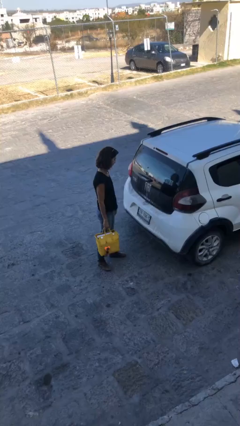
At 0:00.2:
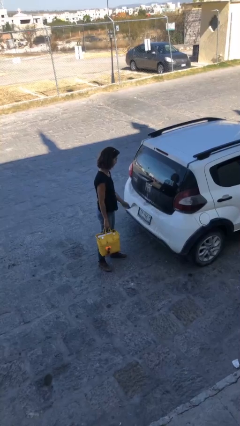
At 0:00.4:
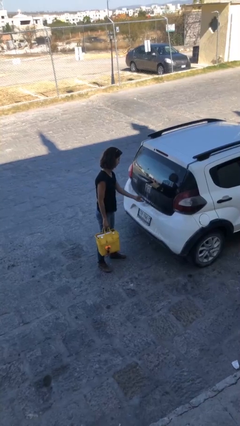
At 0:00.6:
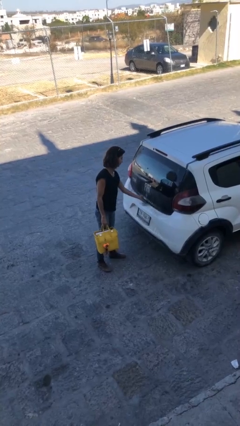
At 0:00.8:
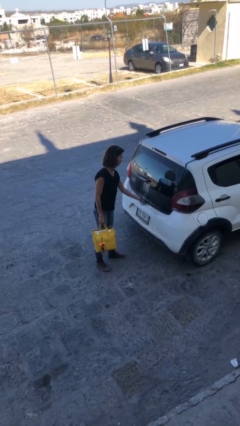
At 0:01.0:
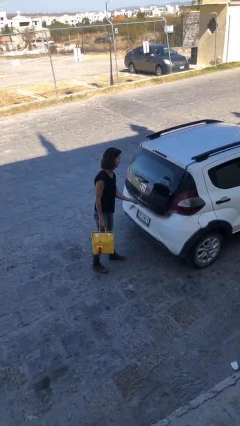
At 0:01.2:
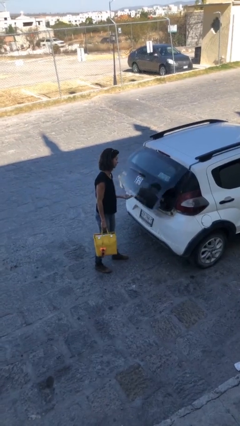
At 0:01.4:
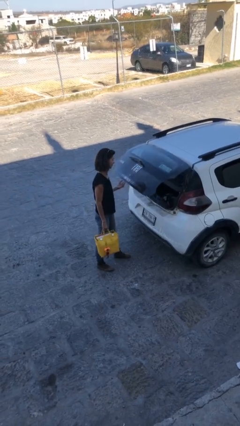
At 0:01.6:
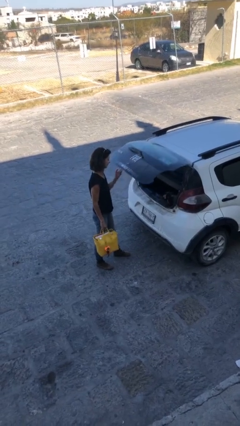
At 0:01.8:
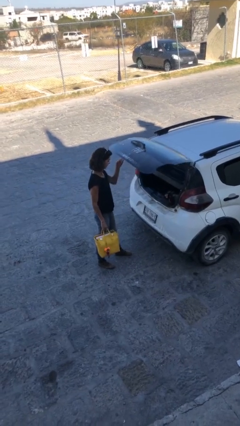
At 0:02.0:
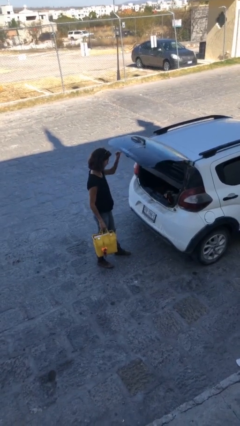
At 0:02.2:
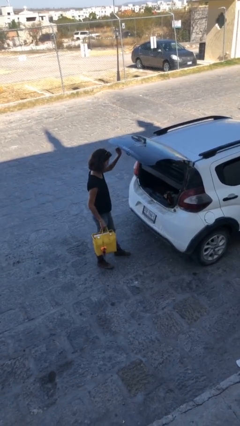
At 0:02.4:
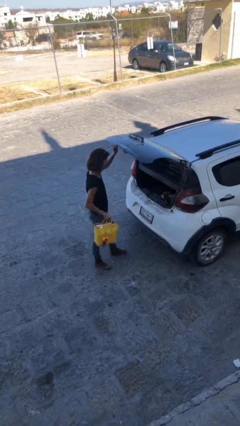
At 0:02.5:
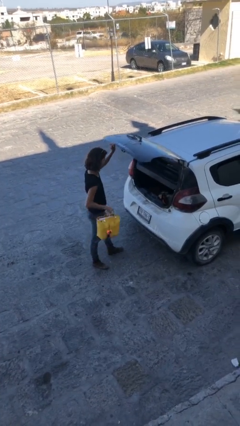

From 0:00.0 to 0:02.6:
person opens car trunk

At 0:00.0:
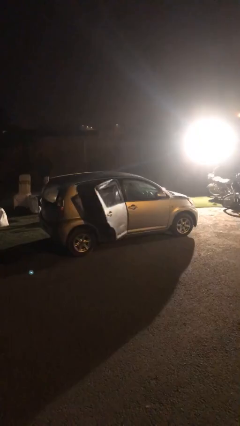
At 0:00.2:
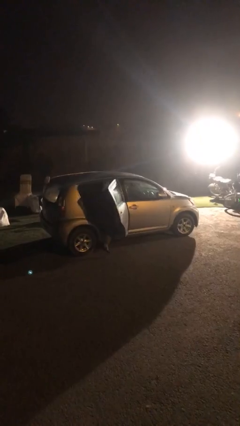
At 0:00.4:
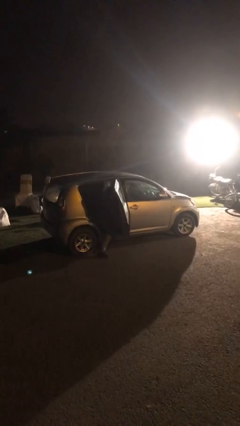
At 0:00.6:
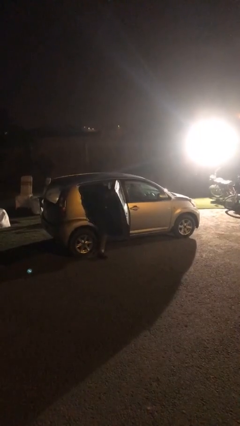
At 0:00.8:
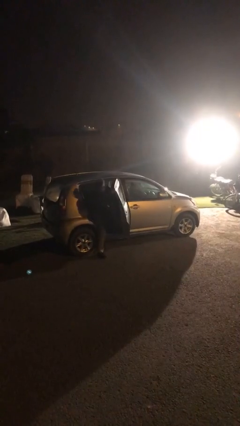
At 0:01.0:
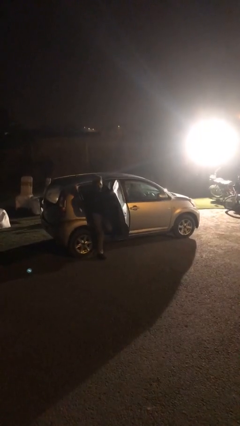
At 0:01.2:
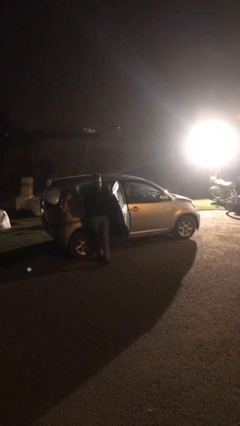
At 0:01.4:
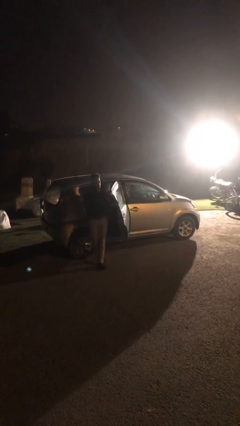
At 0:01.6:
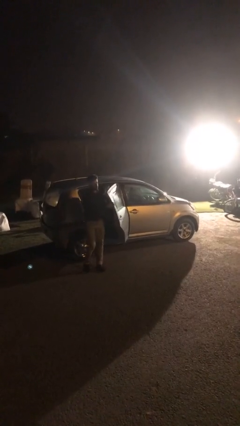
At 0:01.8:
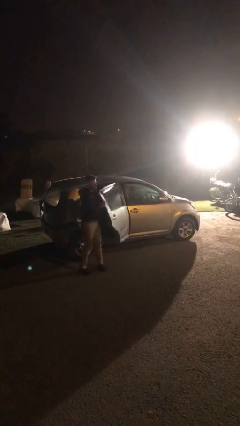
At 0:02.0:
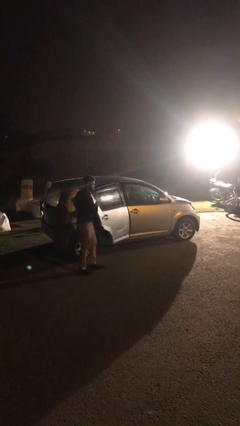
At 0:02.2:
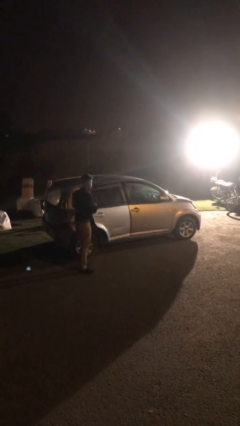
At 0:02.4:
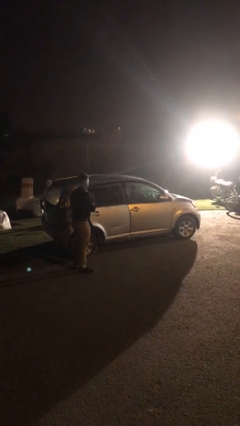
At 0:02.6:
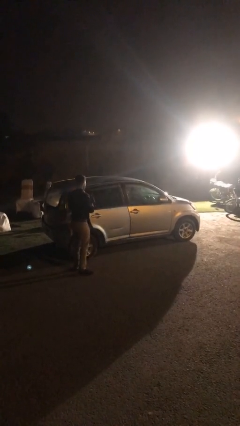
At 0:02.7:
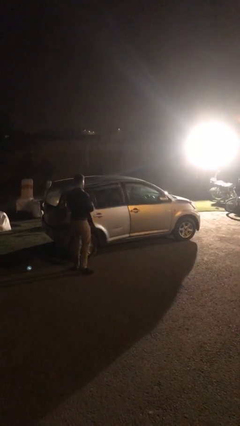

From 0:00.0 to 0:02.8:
car drops off person

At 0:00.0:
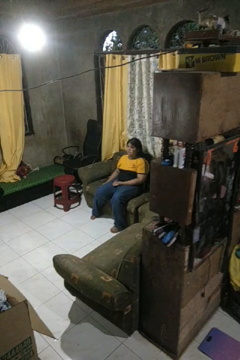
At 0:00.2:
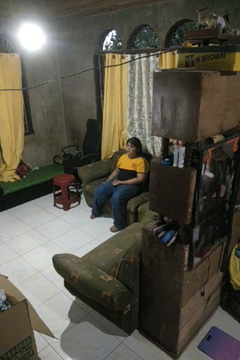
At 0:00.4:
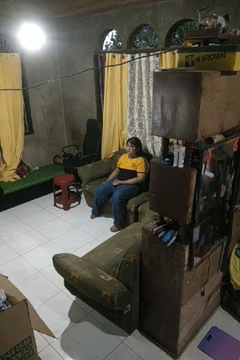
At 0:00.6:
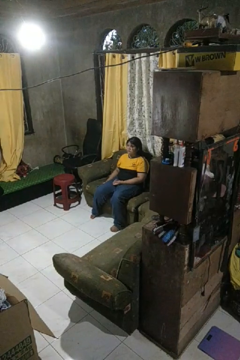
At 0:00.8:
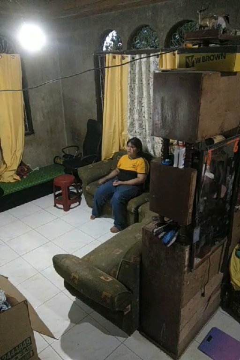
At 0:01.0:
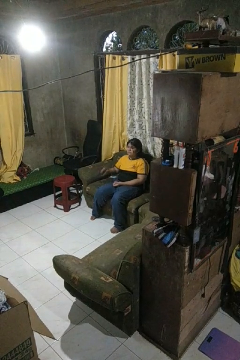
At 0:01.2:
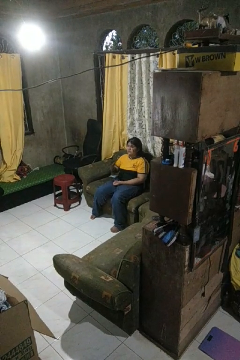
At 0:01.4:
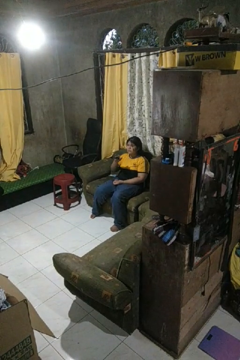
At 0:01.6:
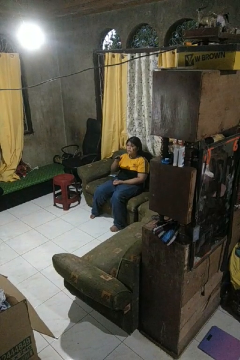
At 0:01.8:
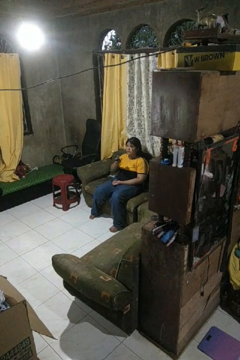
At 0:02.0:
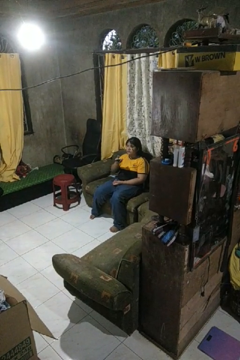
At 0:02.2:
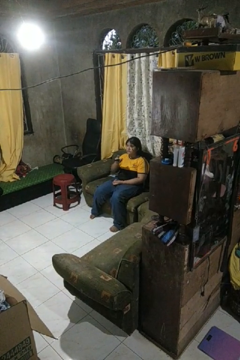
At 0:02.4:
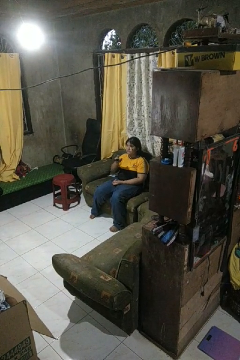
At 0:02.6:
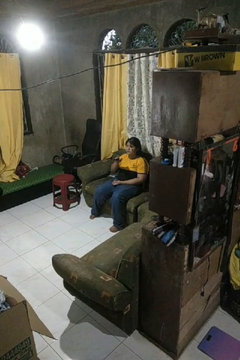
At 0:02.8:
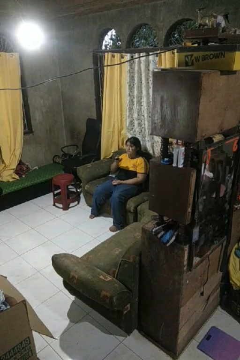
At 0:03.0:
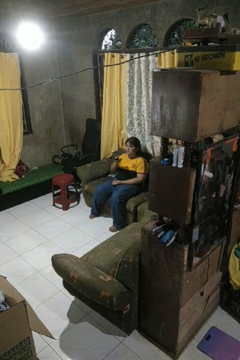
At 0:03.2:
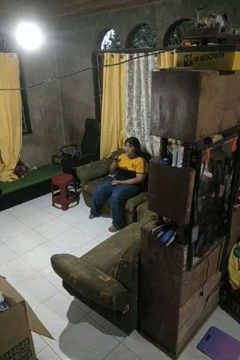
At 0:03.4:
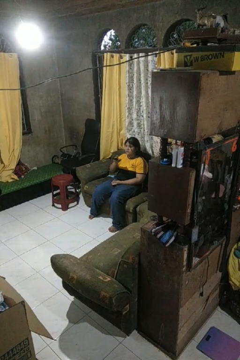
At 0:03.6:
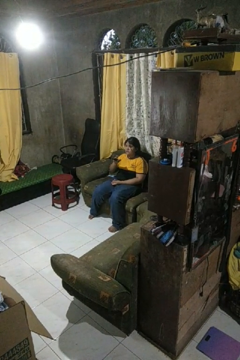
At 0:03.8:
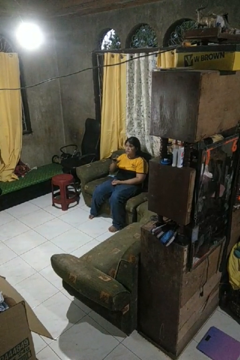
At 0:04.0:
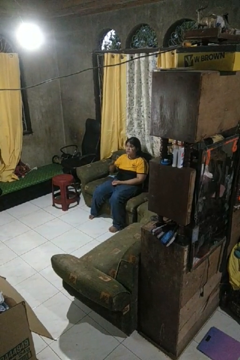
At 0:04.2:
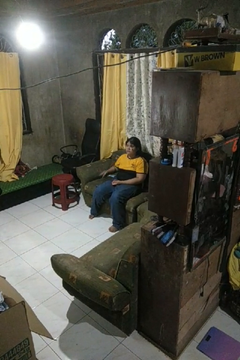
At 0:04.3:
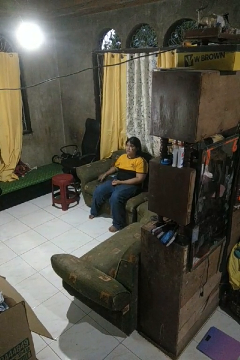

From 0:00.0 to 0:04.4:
person uses television remote

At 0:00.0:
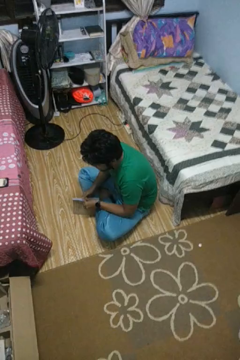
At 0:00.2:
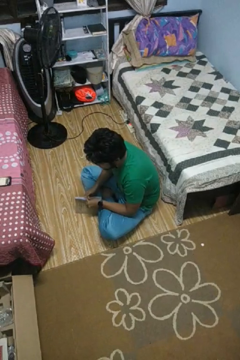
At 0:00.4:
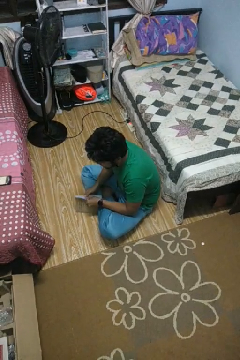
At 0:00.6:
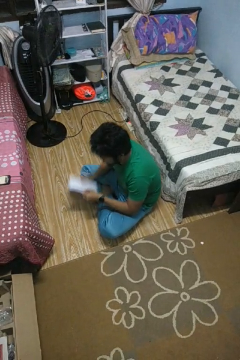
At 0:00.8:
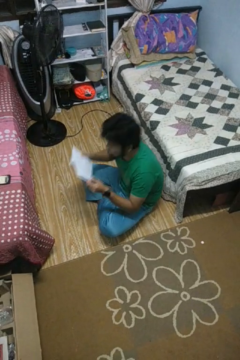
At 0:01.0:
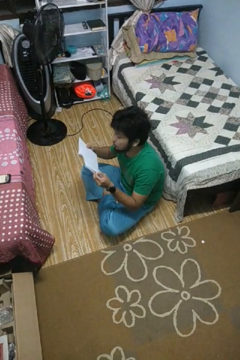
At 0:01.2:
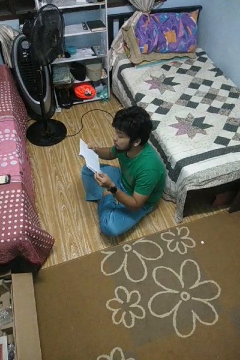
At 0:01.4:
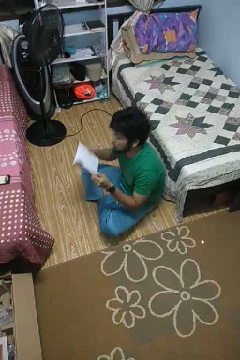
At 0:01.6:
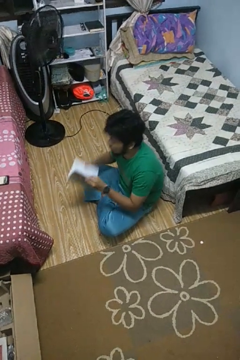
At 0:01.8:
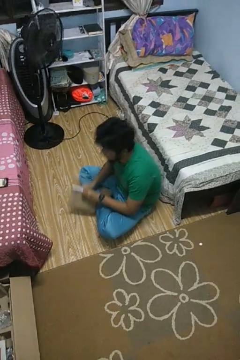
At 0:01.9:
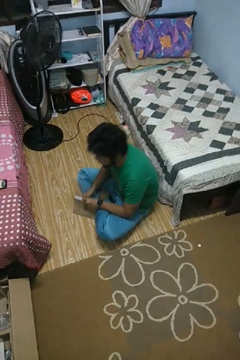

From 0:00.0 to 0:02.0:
person reads book

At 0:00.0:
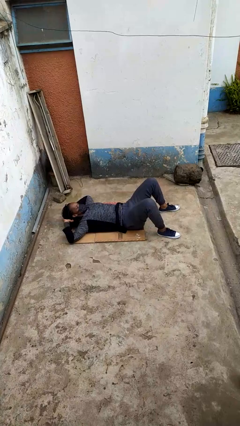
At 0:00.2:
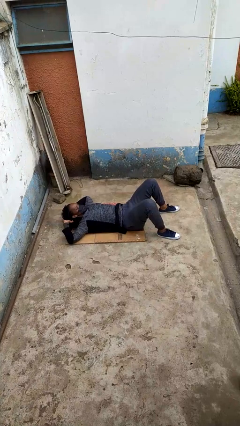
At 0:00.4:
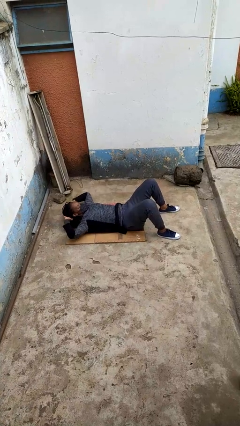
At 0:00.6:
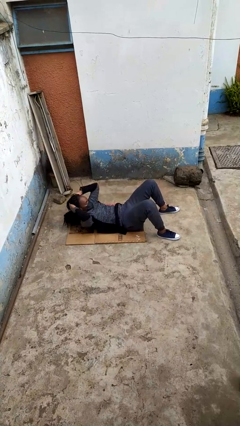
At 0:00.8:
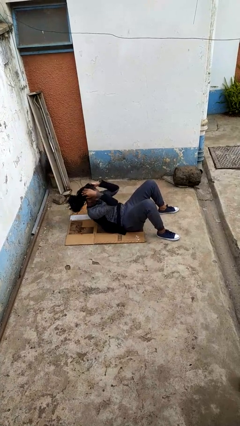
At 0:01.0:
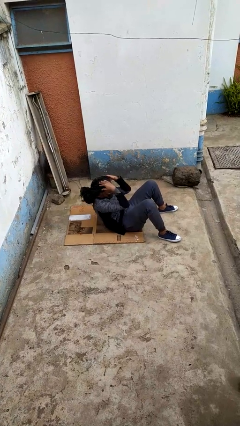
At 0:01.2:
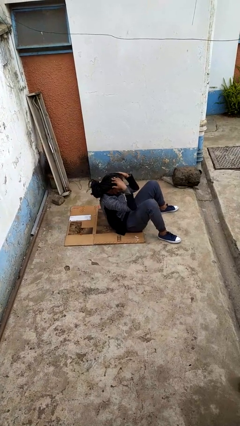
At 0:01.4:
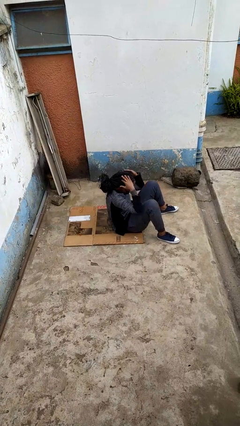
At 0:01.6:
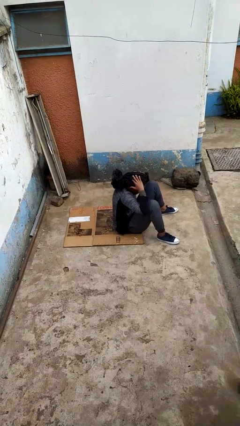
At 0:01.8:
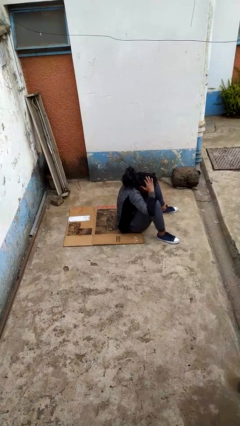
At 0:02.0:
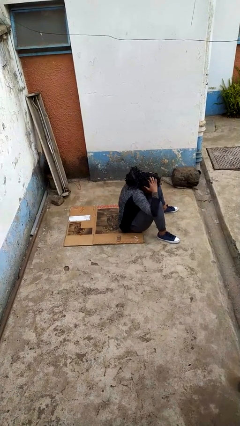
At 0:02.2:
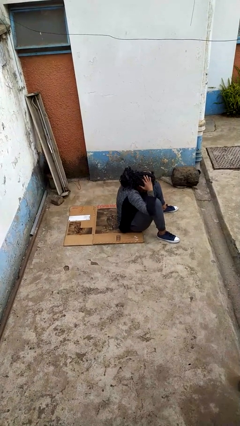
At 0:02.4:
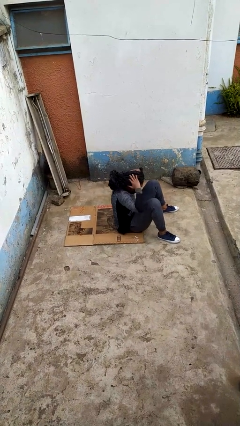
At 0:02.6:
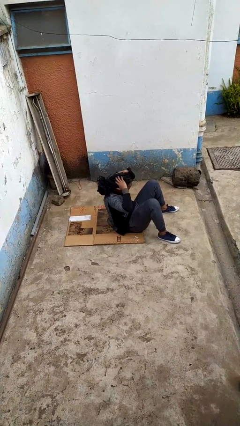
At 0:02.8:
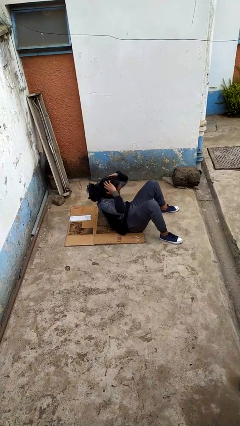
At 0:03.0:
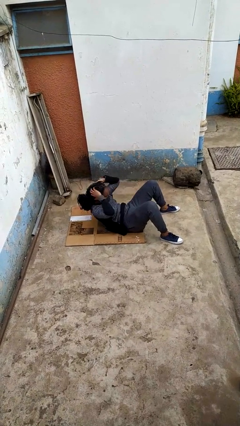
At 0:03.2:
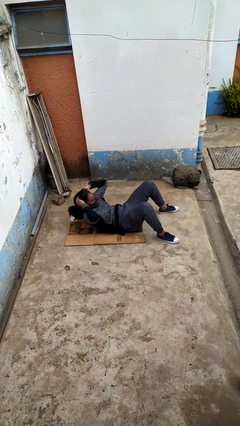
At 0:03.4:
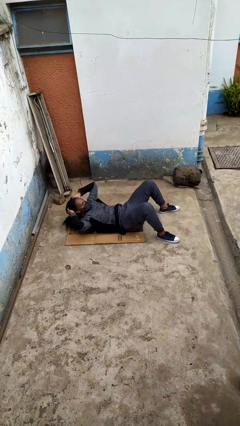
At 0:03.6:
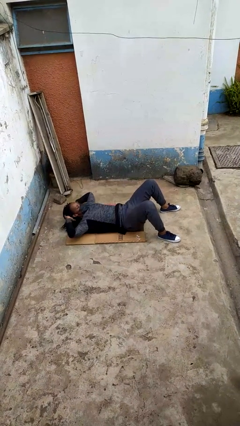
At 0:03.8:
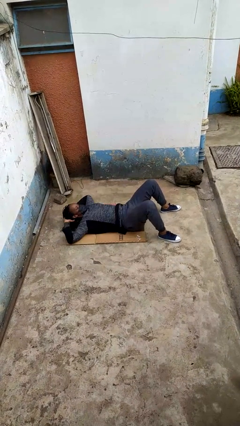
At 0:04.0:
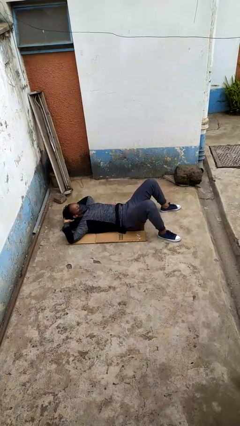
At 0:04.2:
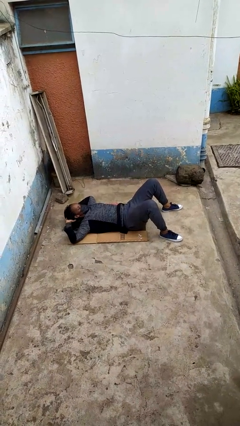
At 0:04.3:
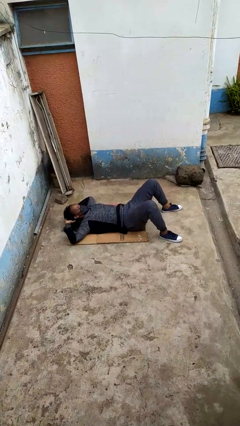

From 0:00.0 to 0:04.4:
person exercises with situp

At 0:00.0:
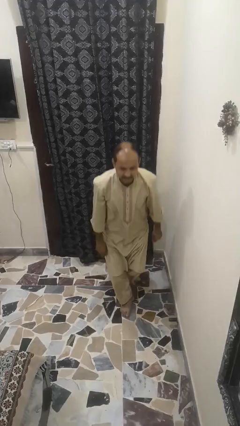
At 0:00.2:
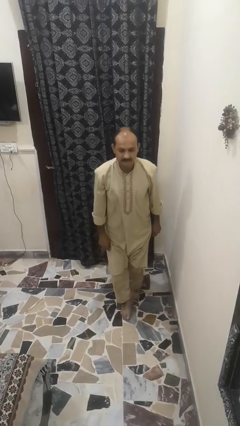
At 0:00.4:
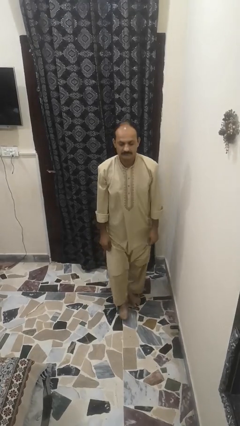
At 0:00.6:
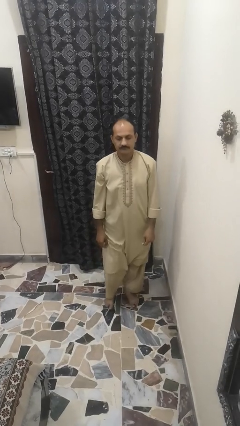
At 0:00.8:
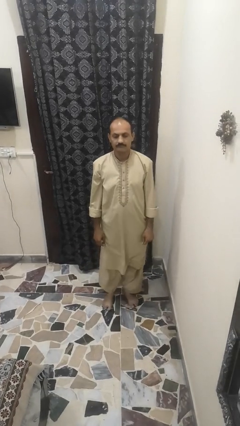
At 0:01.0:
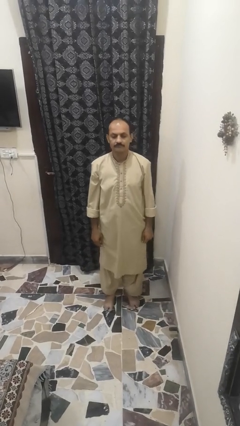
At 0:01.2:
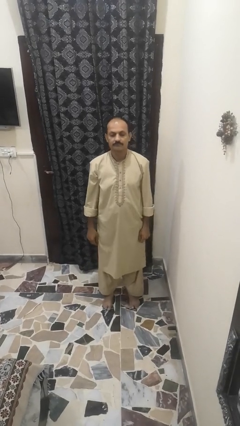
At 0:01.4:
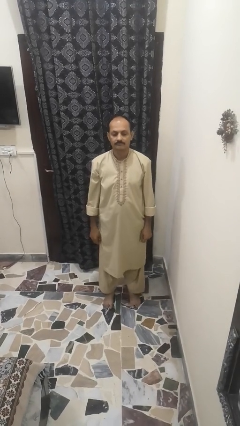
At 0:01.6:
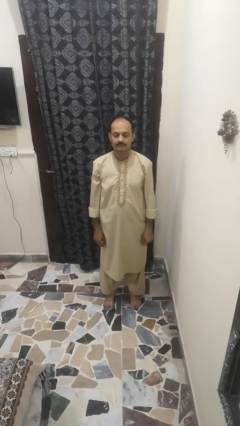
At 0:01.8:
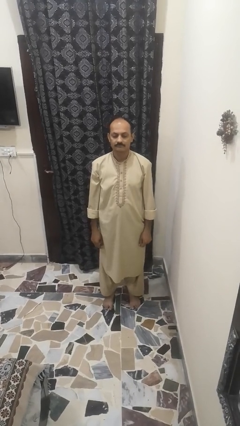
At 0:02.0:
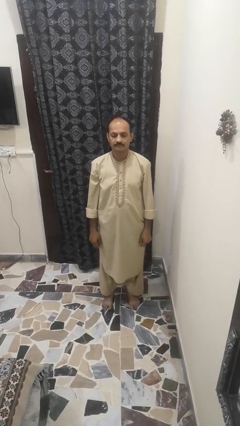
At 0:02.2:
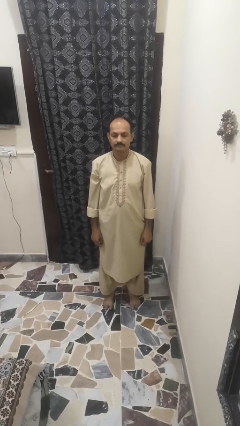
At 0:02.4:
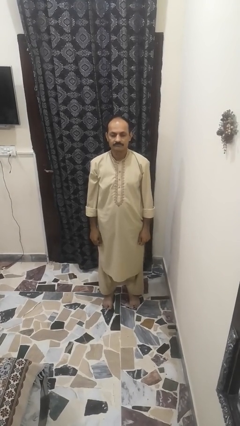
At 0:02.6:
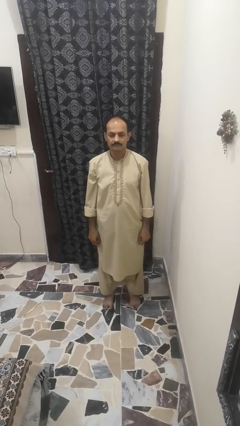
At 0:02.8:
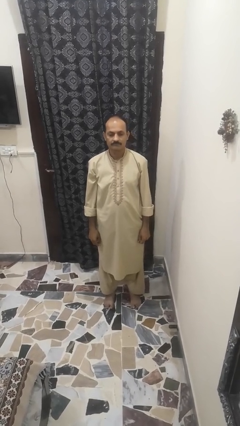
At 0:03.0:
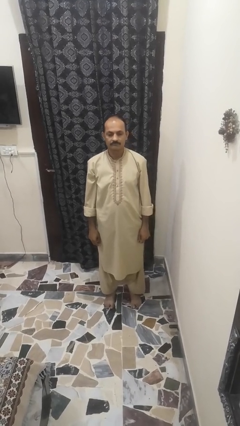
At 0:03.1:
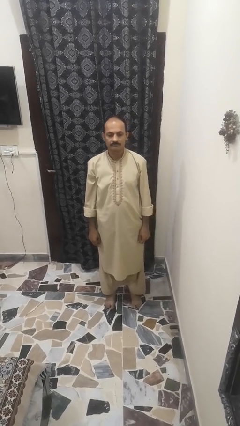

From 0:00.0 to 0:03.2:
person reads newspaper
